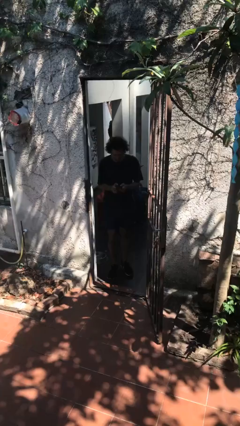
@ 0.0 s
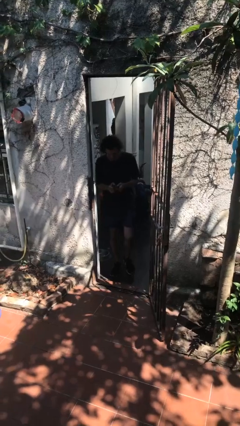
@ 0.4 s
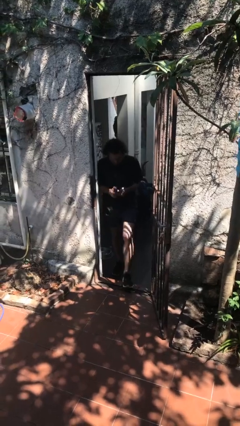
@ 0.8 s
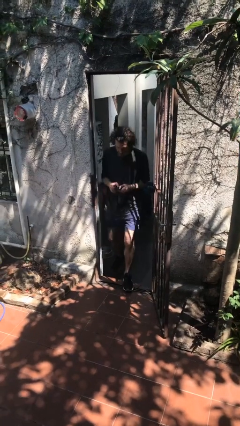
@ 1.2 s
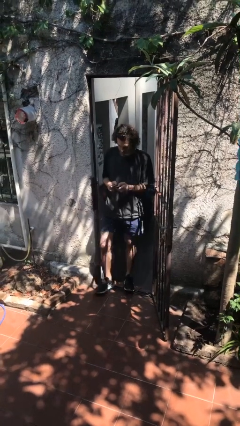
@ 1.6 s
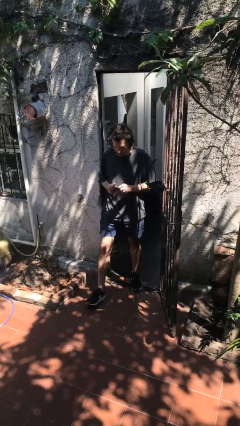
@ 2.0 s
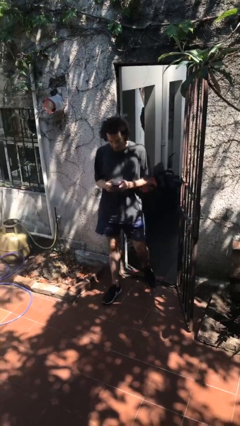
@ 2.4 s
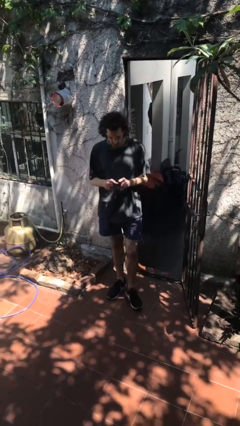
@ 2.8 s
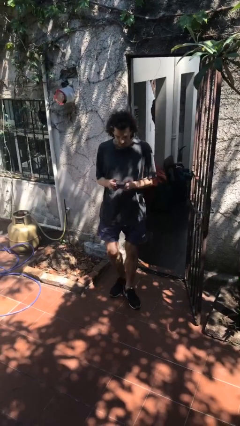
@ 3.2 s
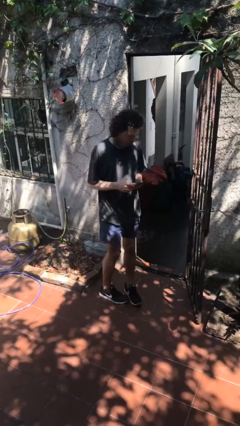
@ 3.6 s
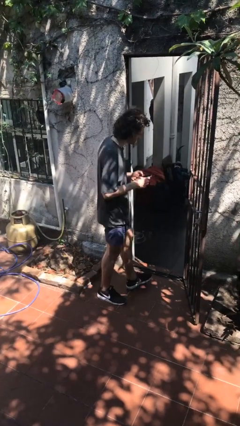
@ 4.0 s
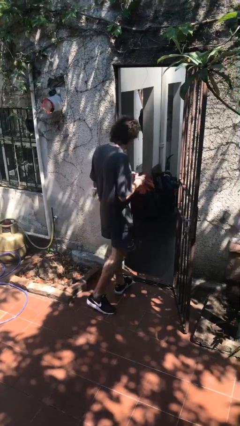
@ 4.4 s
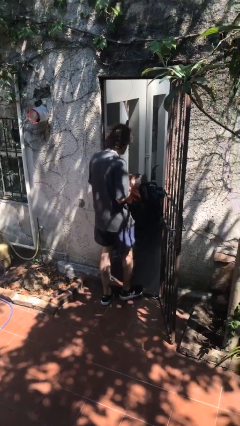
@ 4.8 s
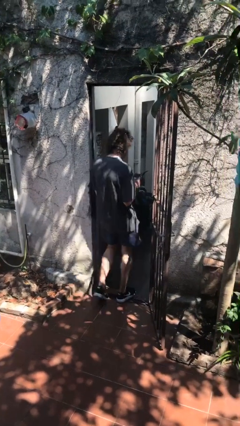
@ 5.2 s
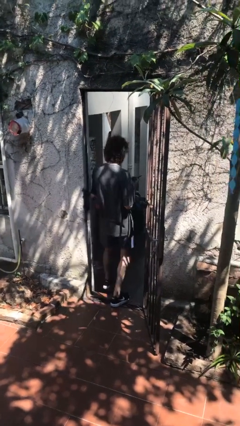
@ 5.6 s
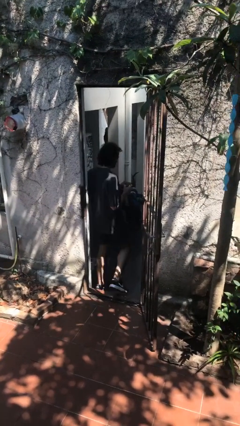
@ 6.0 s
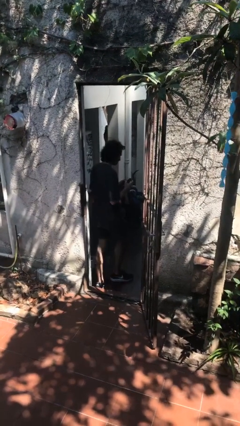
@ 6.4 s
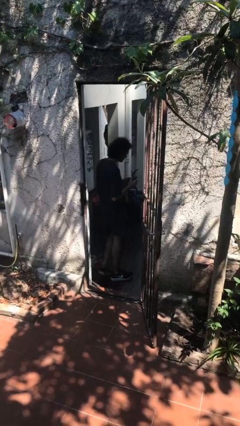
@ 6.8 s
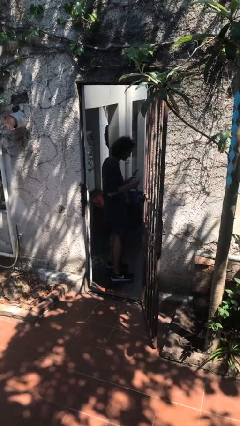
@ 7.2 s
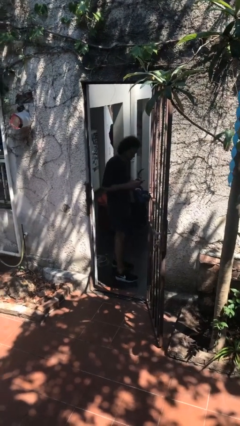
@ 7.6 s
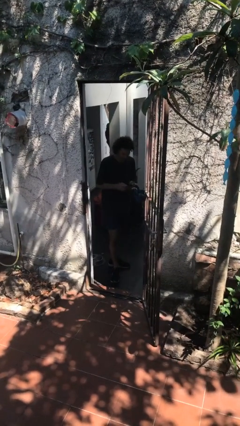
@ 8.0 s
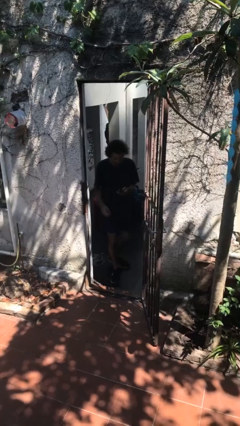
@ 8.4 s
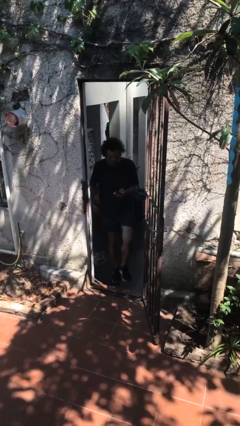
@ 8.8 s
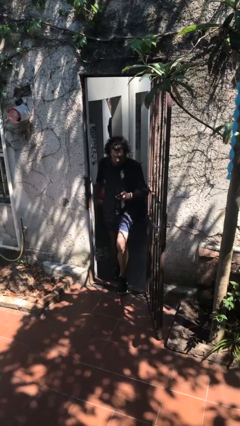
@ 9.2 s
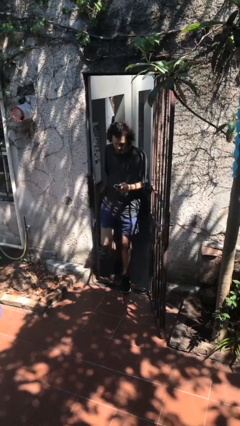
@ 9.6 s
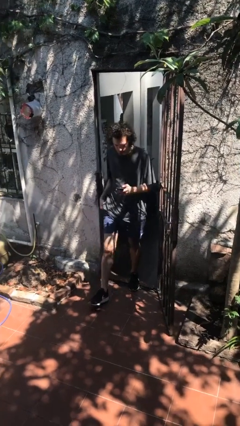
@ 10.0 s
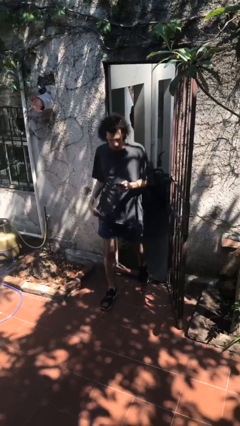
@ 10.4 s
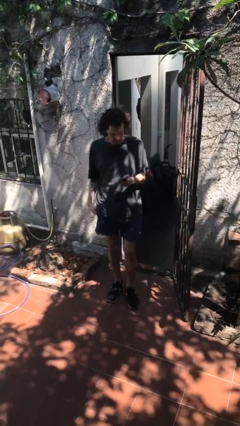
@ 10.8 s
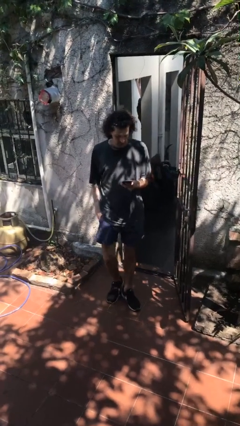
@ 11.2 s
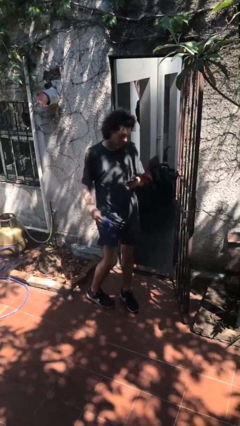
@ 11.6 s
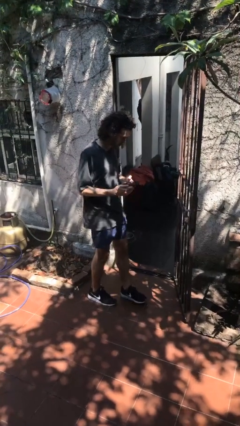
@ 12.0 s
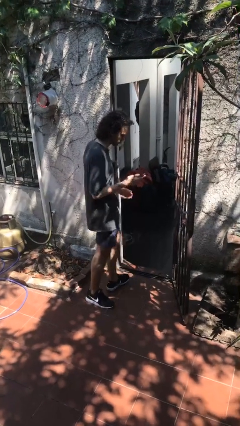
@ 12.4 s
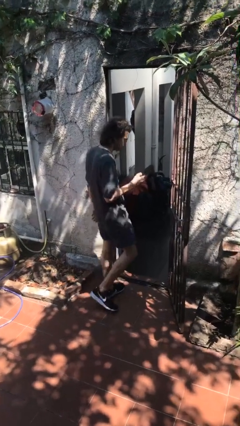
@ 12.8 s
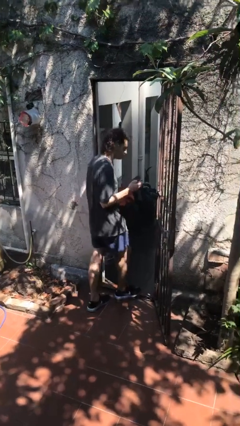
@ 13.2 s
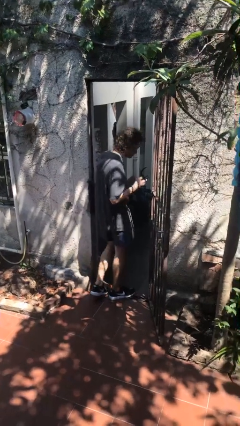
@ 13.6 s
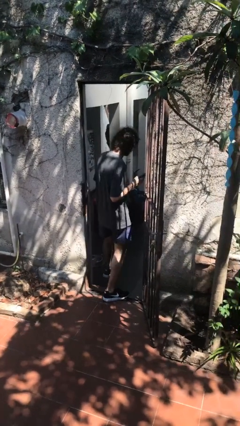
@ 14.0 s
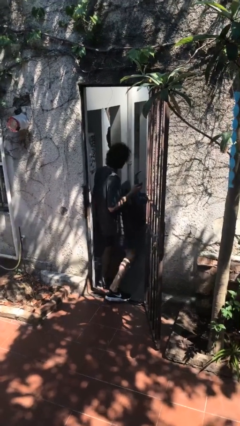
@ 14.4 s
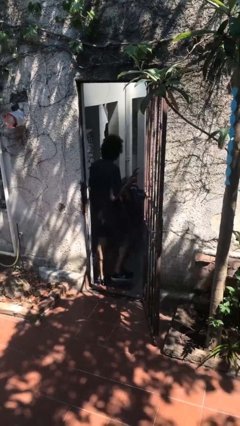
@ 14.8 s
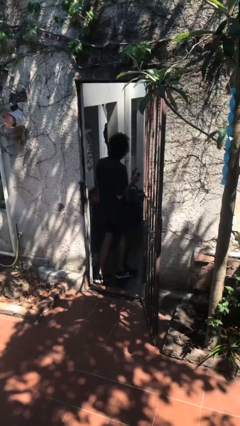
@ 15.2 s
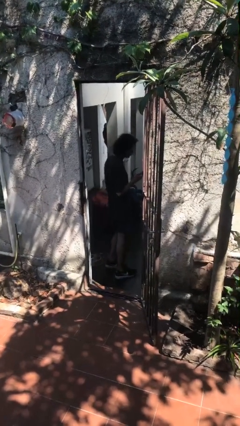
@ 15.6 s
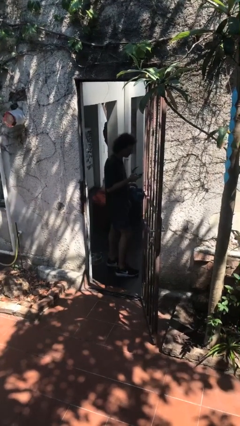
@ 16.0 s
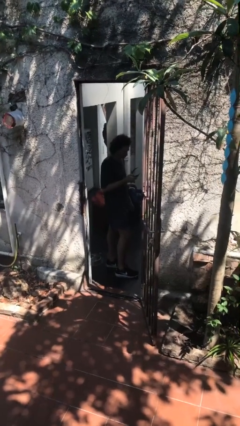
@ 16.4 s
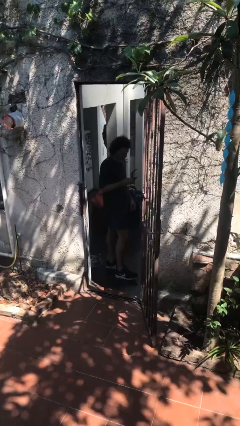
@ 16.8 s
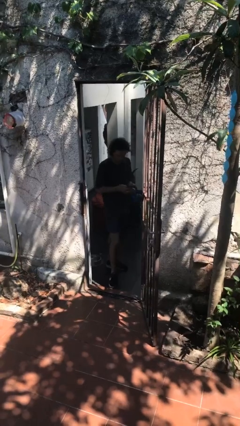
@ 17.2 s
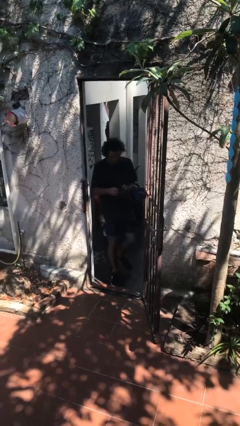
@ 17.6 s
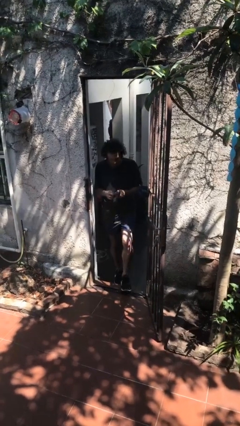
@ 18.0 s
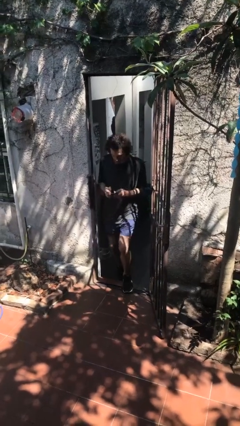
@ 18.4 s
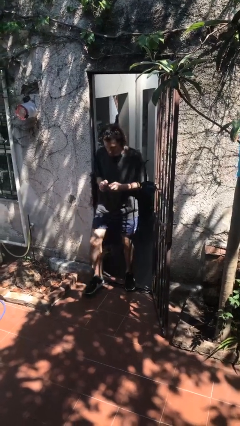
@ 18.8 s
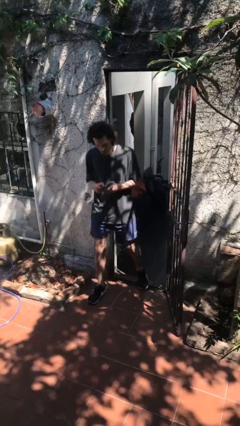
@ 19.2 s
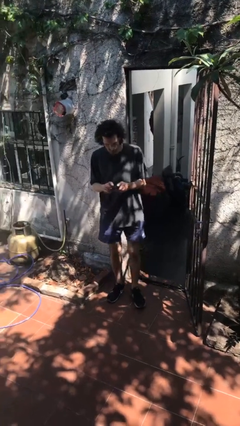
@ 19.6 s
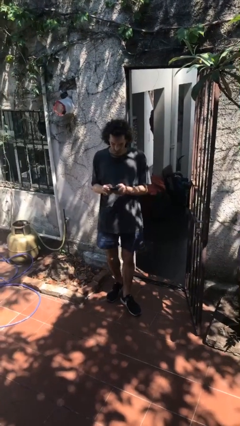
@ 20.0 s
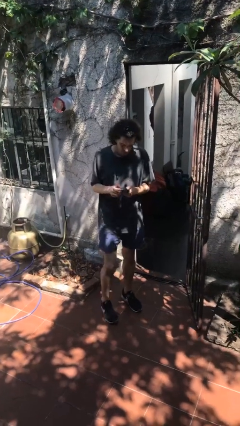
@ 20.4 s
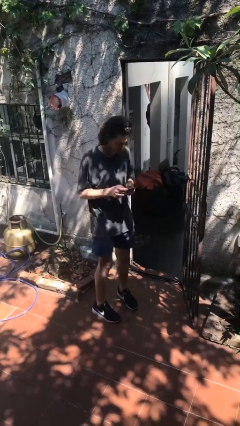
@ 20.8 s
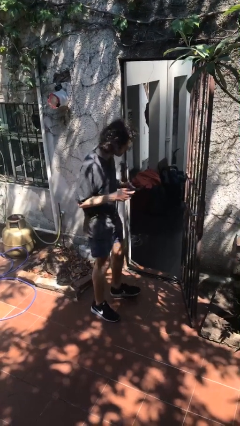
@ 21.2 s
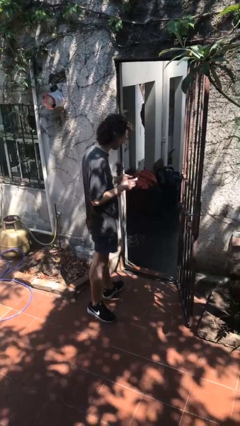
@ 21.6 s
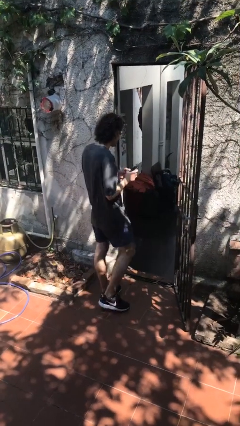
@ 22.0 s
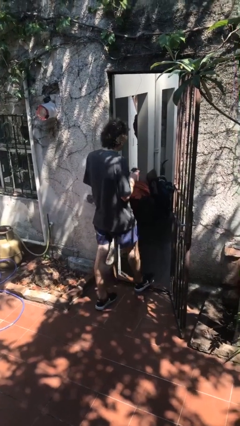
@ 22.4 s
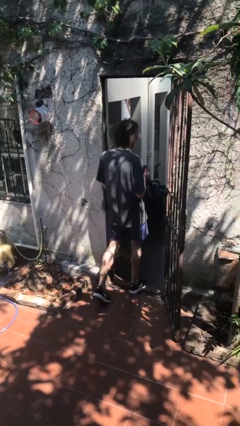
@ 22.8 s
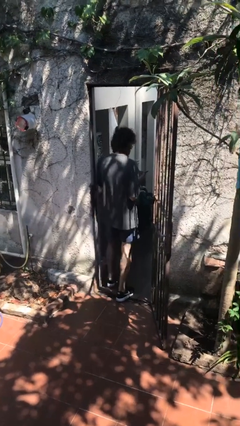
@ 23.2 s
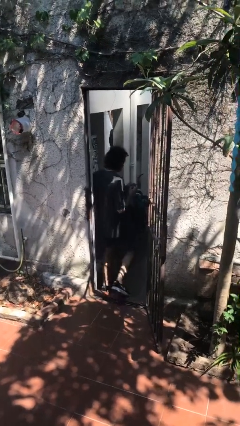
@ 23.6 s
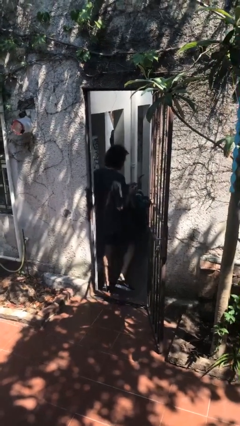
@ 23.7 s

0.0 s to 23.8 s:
person texts on phone

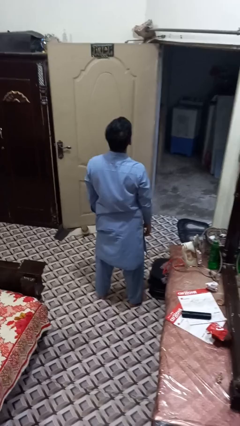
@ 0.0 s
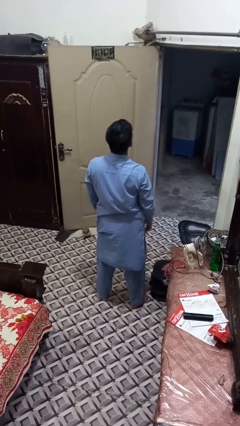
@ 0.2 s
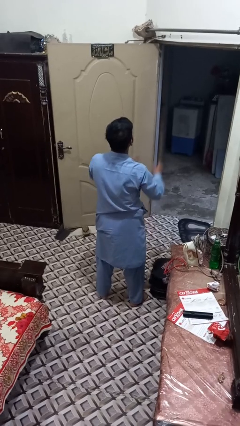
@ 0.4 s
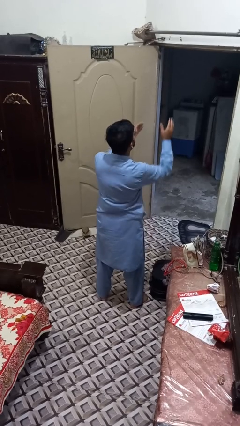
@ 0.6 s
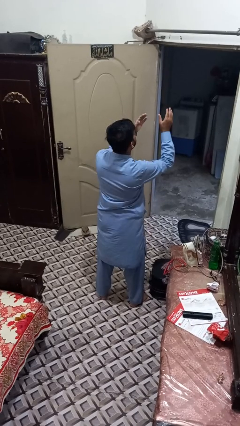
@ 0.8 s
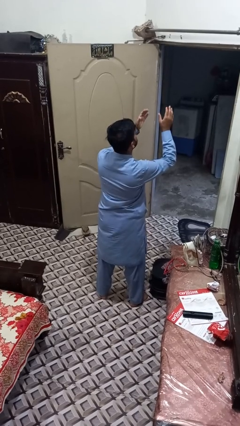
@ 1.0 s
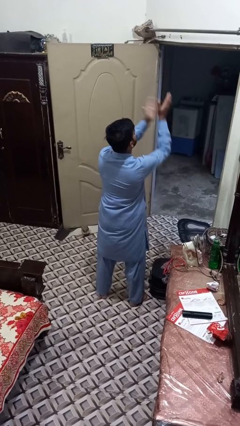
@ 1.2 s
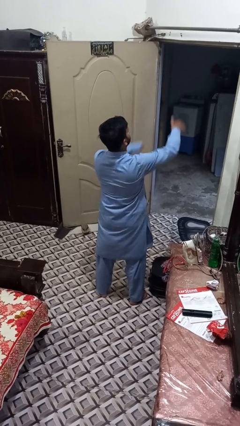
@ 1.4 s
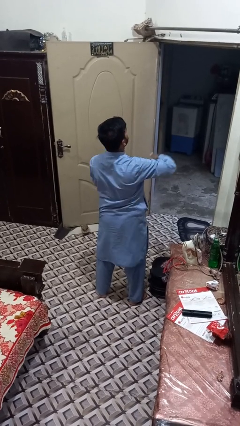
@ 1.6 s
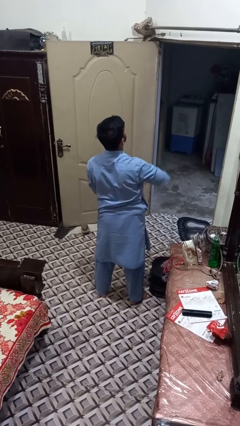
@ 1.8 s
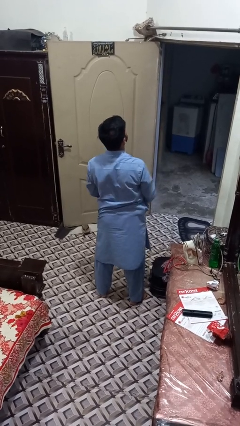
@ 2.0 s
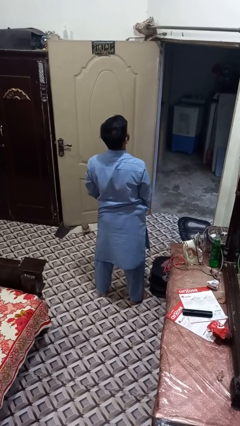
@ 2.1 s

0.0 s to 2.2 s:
person swats bug

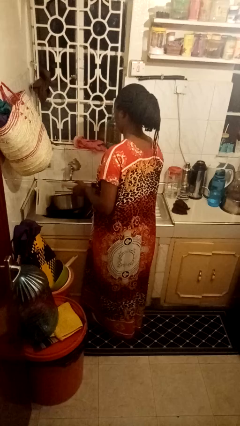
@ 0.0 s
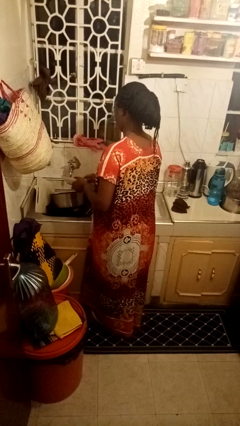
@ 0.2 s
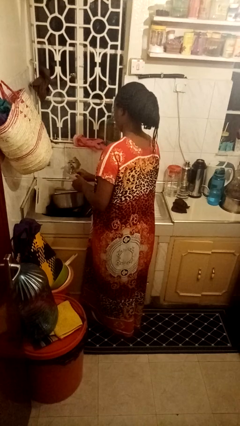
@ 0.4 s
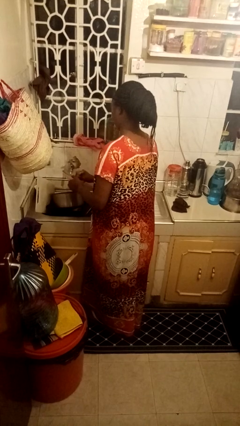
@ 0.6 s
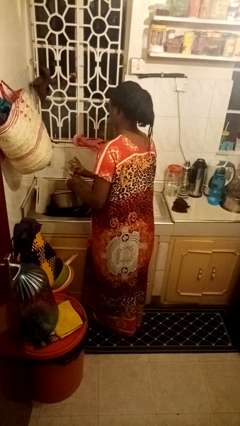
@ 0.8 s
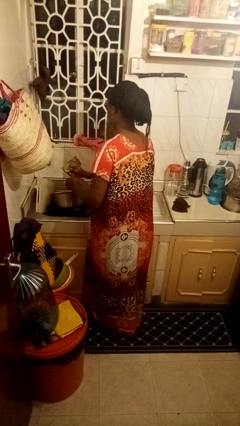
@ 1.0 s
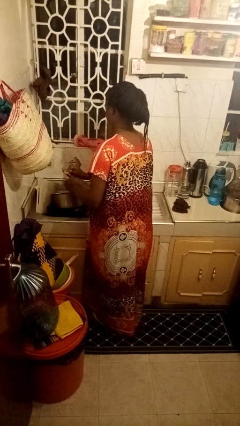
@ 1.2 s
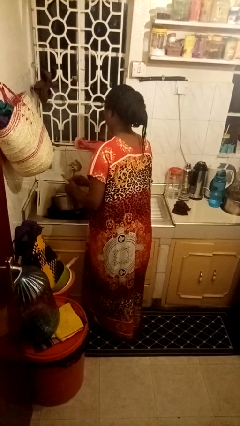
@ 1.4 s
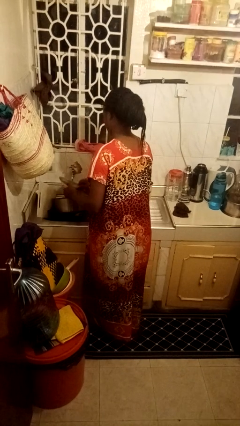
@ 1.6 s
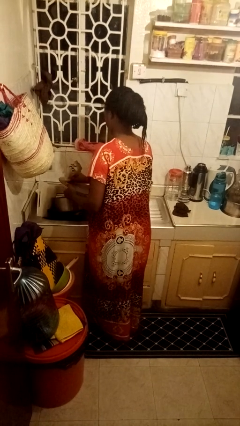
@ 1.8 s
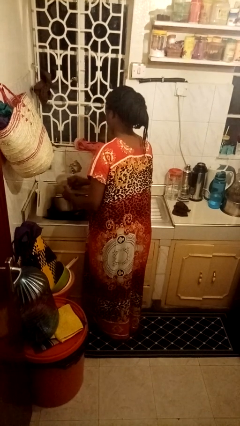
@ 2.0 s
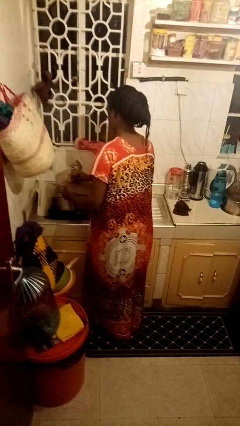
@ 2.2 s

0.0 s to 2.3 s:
person washes dish

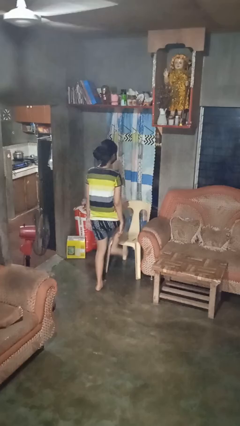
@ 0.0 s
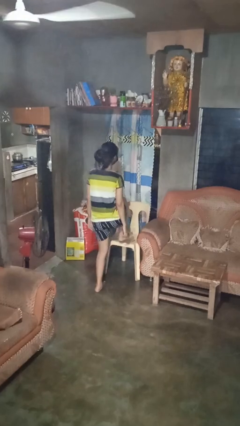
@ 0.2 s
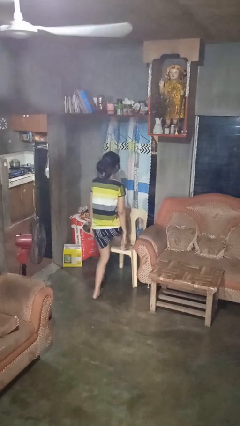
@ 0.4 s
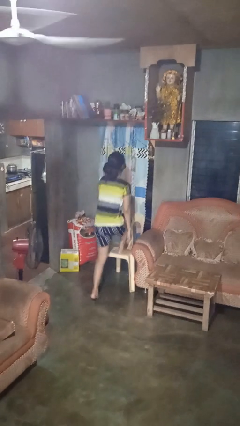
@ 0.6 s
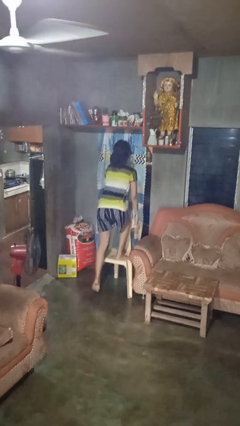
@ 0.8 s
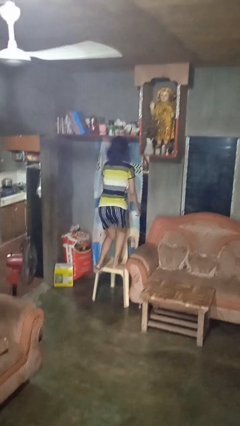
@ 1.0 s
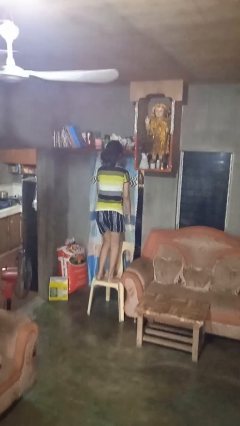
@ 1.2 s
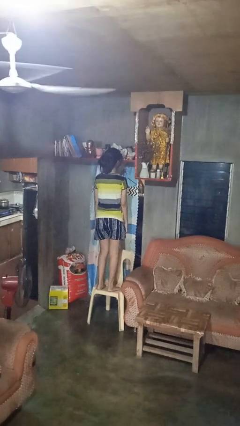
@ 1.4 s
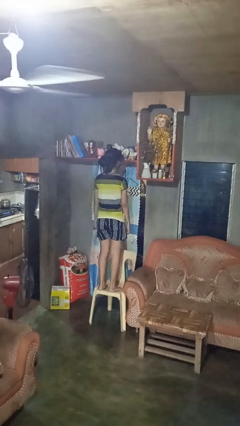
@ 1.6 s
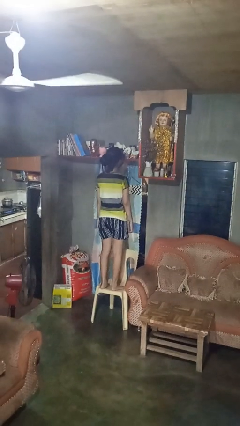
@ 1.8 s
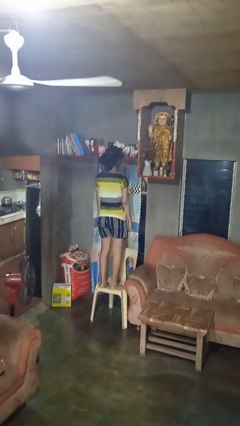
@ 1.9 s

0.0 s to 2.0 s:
person climbs on chair
